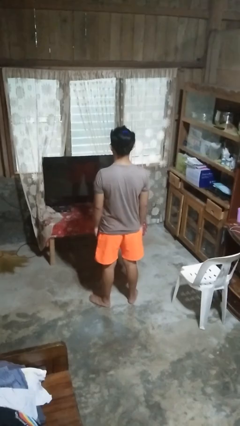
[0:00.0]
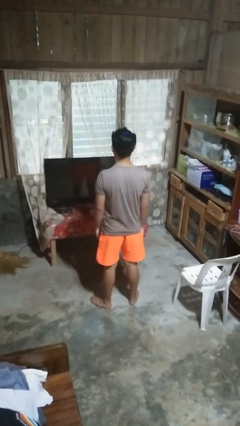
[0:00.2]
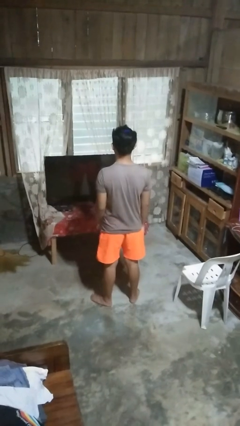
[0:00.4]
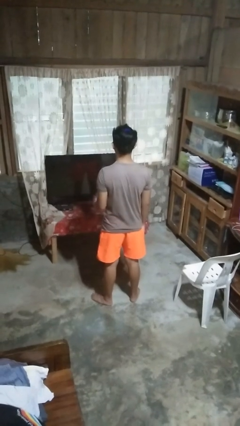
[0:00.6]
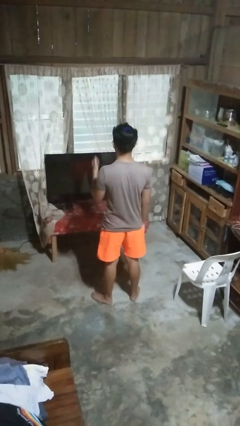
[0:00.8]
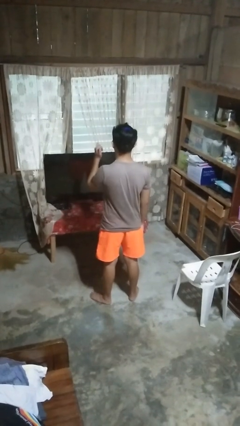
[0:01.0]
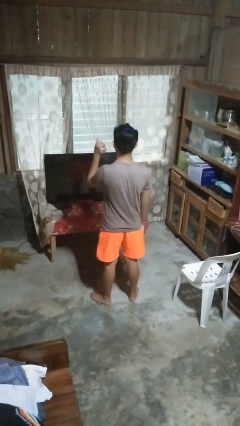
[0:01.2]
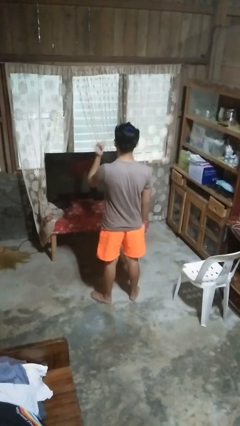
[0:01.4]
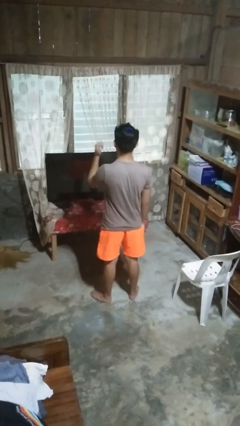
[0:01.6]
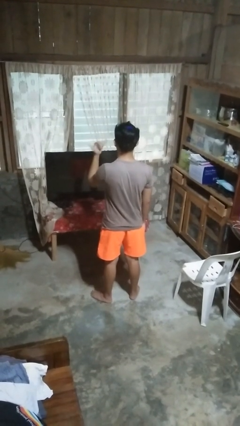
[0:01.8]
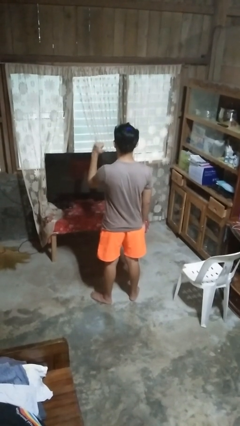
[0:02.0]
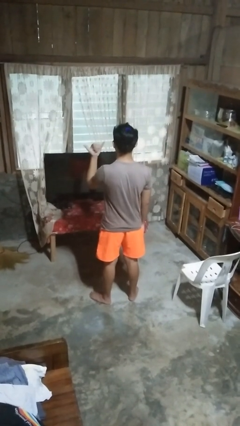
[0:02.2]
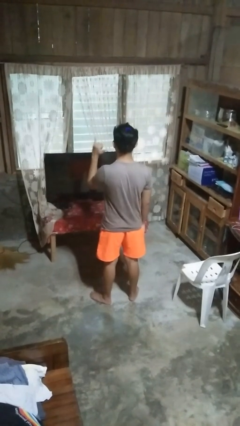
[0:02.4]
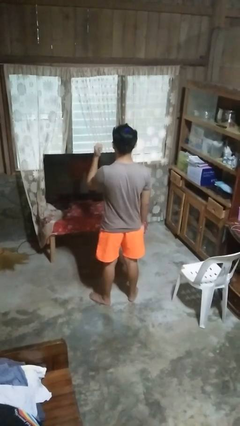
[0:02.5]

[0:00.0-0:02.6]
person gestures hang loose

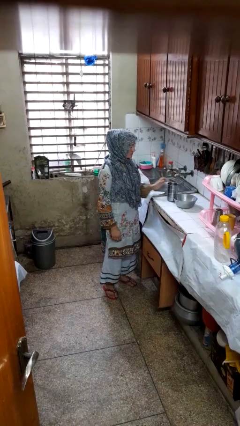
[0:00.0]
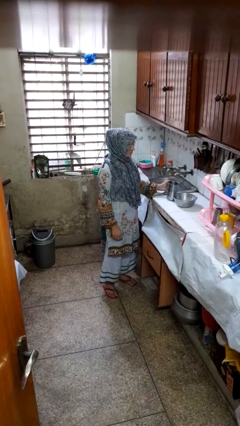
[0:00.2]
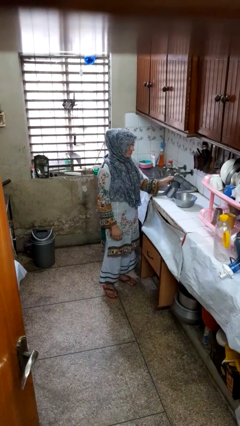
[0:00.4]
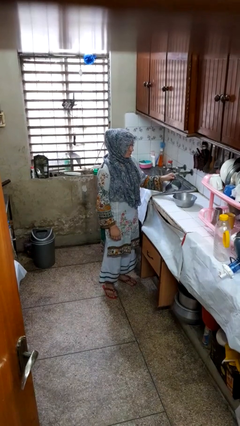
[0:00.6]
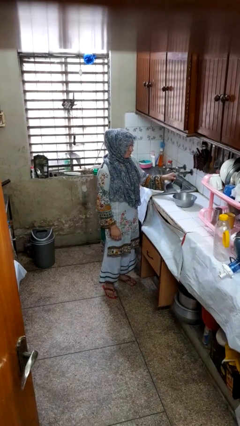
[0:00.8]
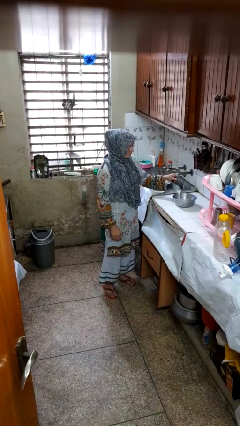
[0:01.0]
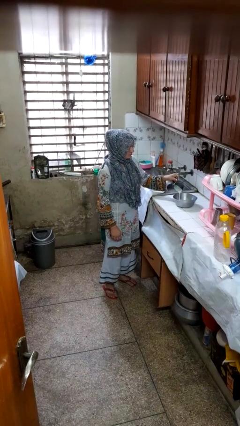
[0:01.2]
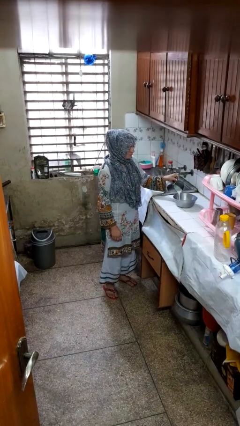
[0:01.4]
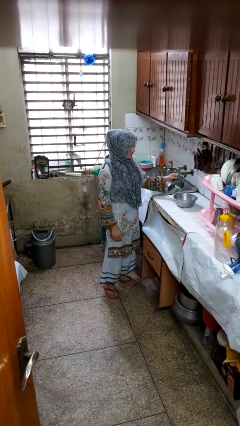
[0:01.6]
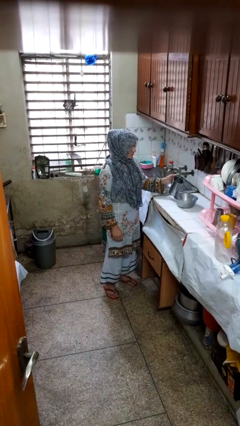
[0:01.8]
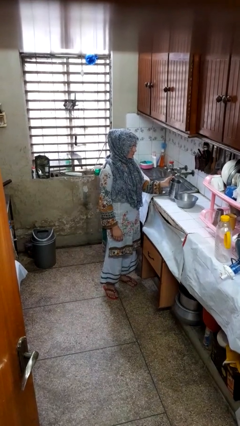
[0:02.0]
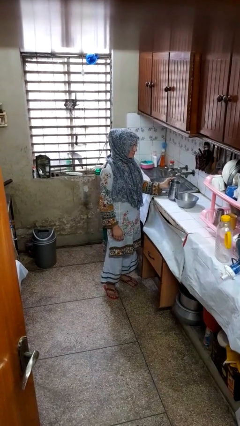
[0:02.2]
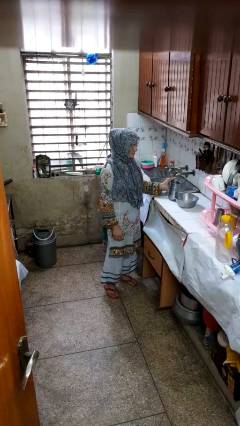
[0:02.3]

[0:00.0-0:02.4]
person pours into bowl

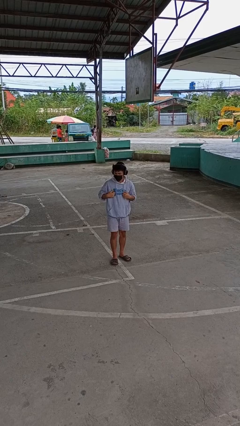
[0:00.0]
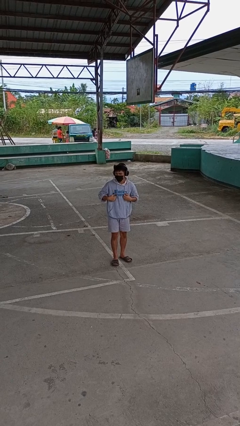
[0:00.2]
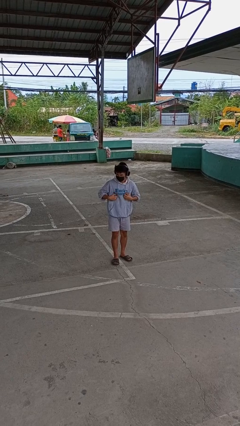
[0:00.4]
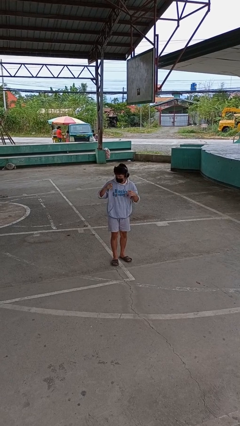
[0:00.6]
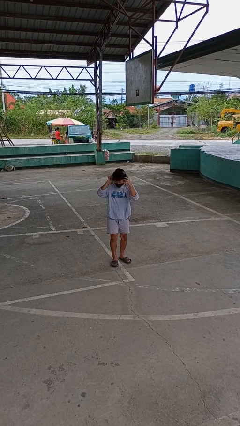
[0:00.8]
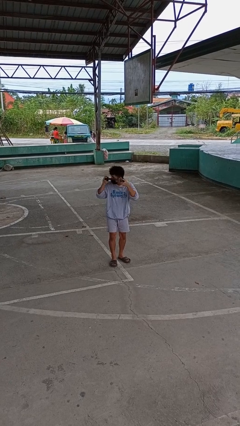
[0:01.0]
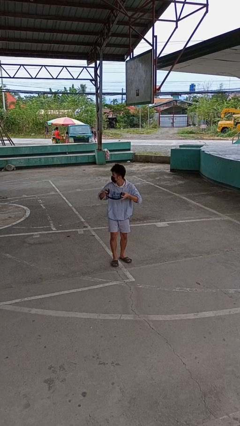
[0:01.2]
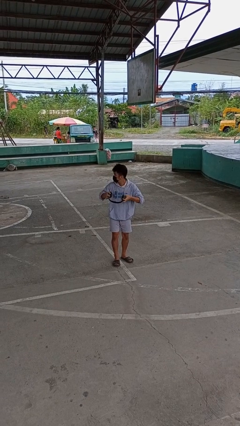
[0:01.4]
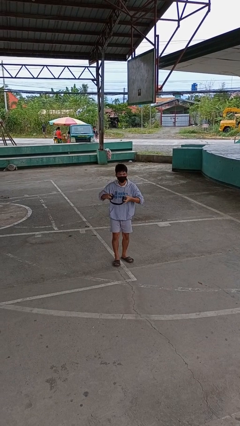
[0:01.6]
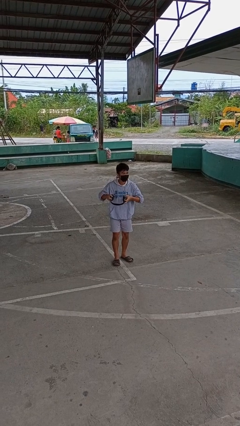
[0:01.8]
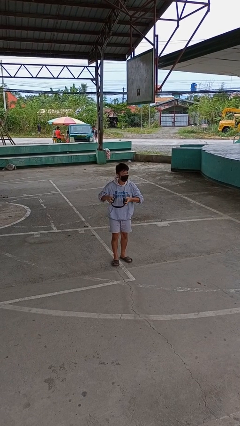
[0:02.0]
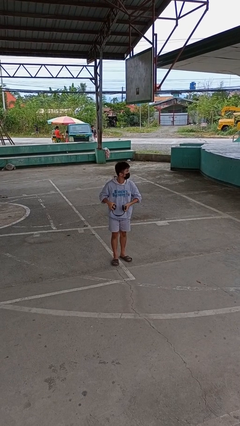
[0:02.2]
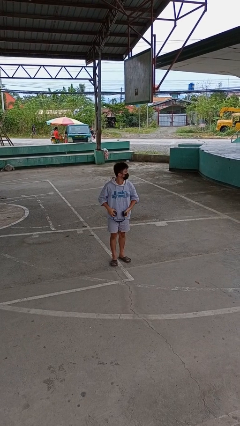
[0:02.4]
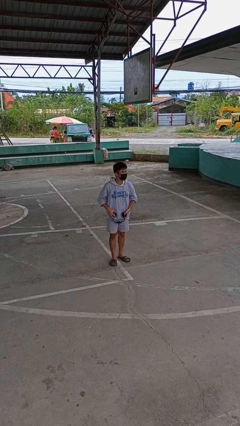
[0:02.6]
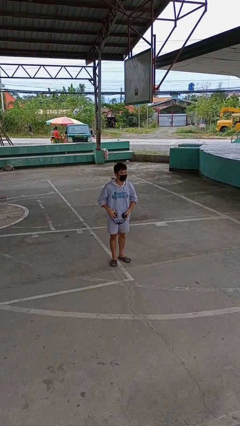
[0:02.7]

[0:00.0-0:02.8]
person takes off headphones

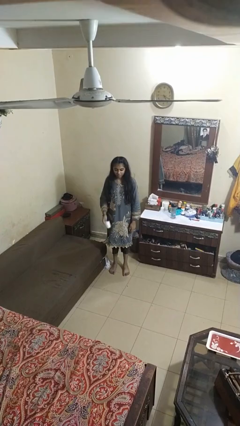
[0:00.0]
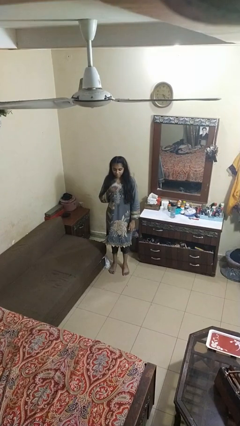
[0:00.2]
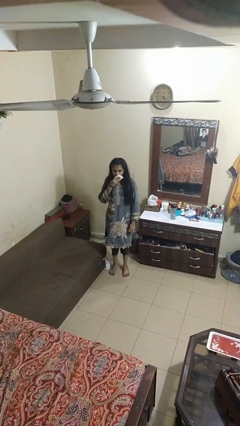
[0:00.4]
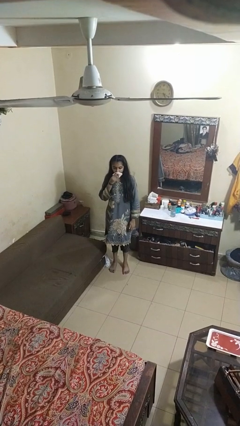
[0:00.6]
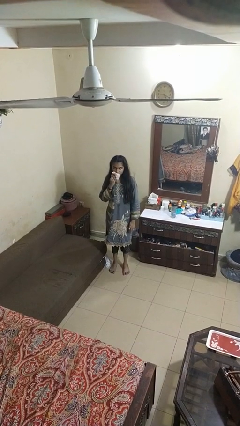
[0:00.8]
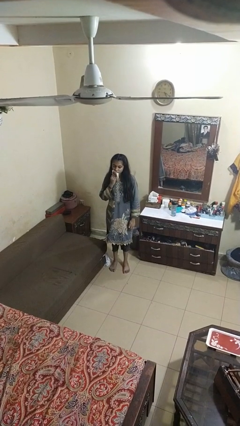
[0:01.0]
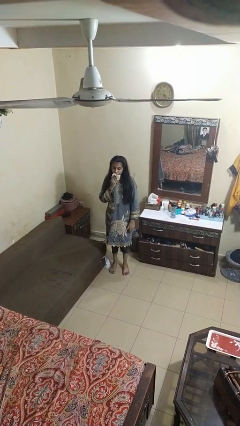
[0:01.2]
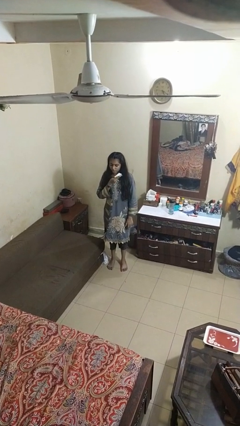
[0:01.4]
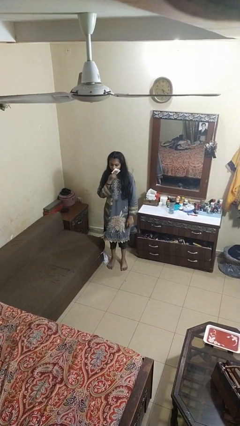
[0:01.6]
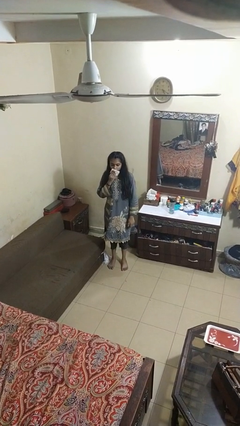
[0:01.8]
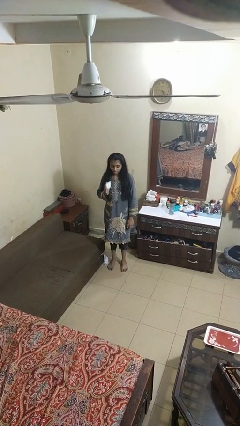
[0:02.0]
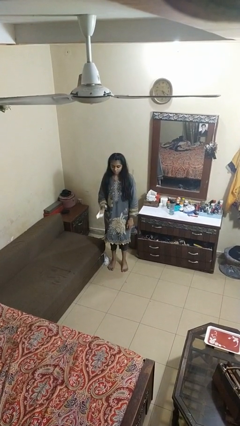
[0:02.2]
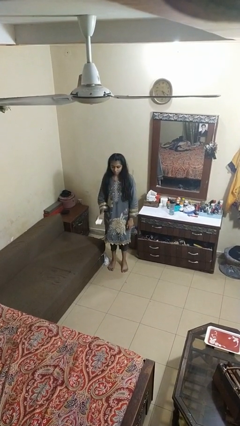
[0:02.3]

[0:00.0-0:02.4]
person wipes mouth with napkin

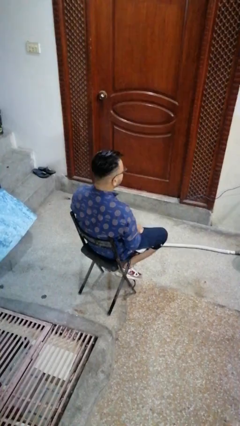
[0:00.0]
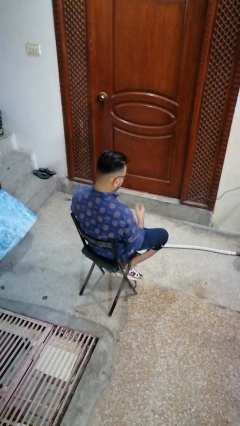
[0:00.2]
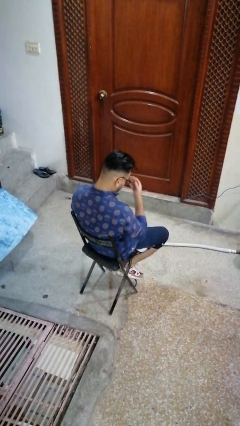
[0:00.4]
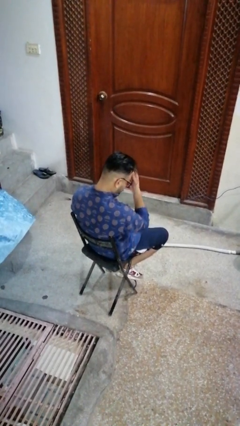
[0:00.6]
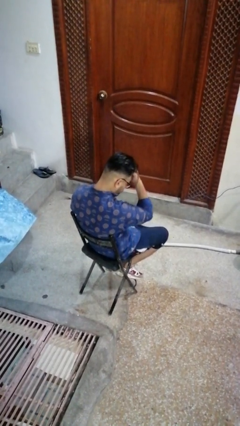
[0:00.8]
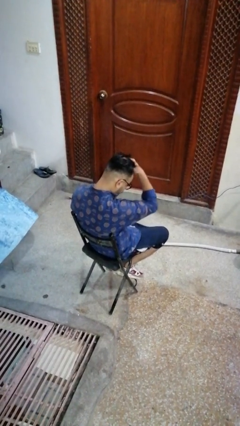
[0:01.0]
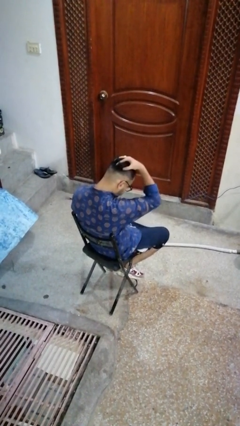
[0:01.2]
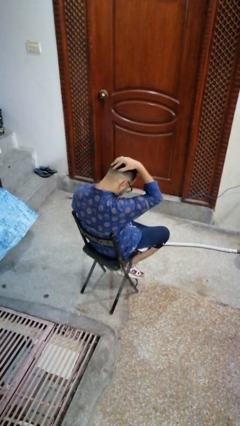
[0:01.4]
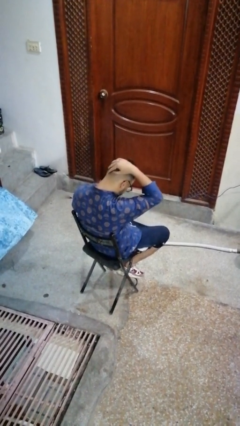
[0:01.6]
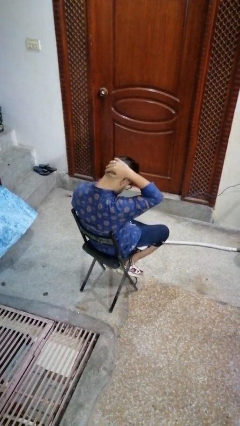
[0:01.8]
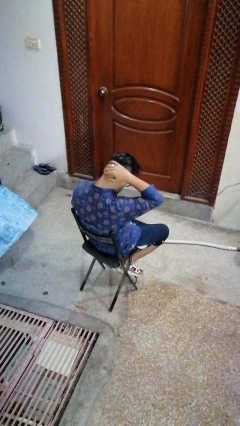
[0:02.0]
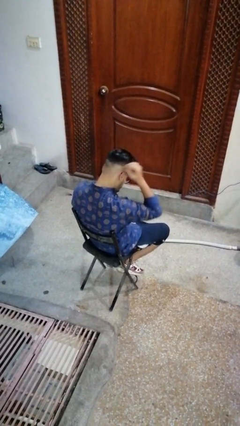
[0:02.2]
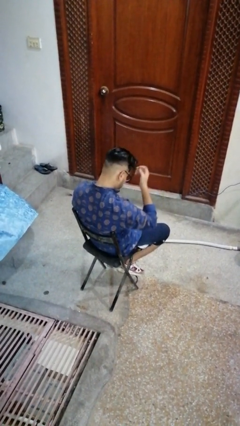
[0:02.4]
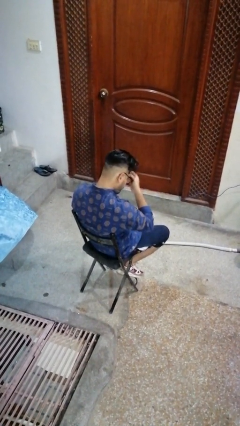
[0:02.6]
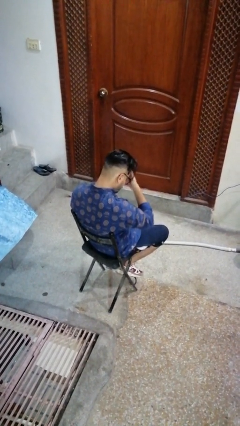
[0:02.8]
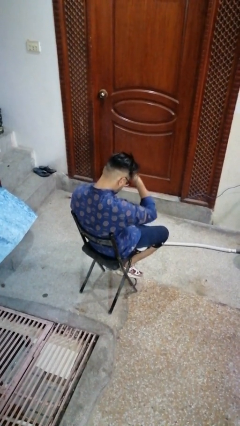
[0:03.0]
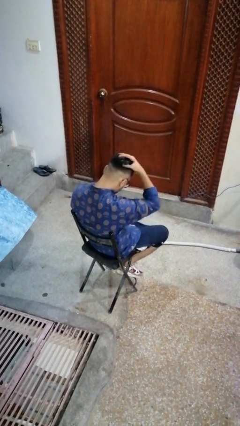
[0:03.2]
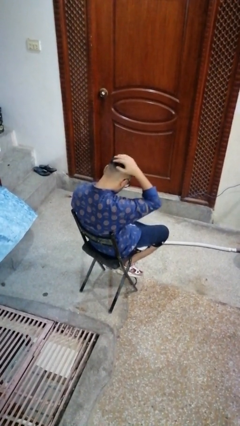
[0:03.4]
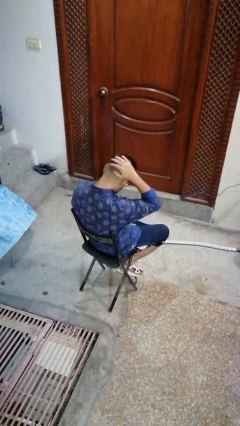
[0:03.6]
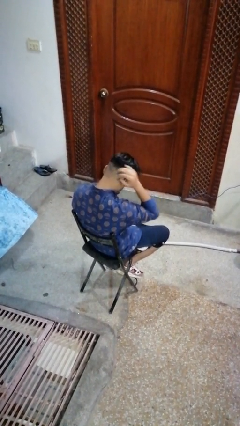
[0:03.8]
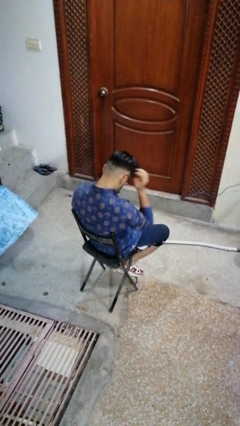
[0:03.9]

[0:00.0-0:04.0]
person strokes hair

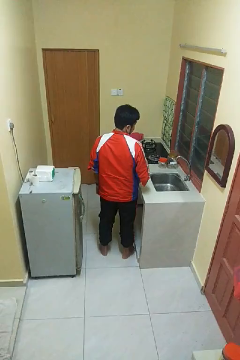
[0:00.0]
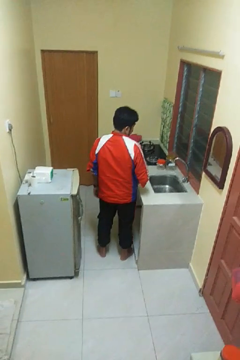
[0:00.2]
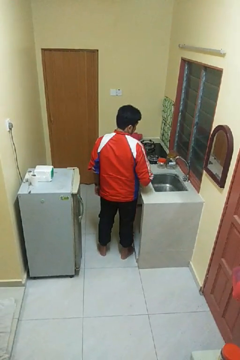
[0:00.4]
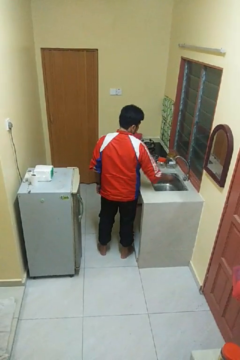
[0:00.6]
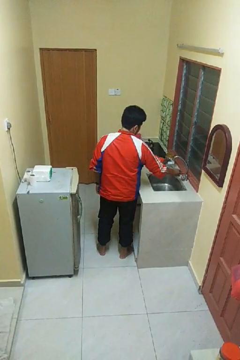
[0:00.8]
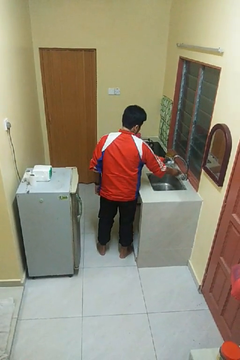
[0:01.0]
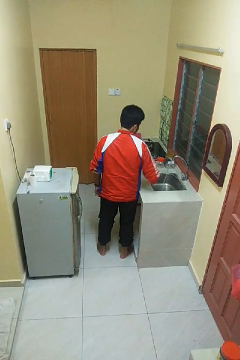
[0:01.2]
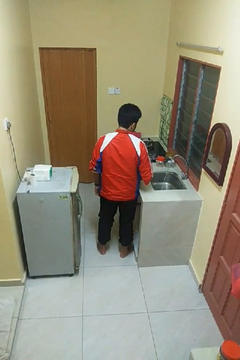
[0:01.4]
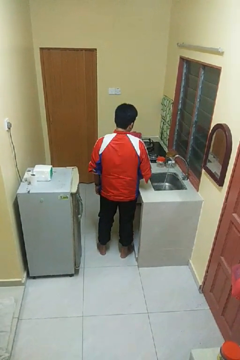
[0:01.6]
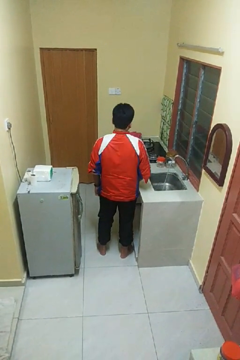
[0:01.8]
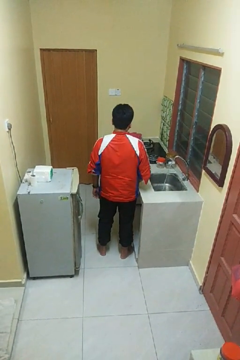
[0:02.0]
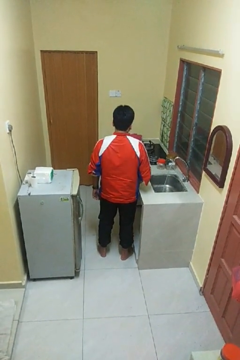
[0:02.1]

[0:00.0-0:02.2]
person turns on faucet

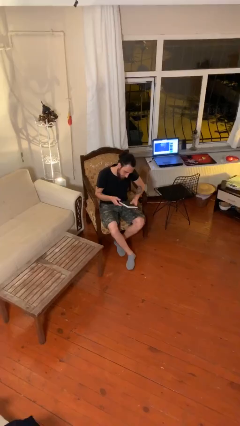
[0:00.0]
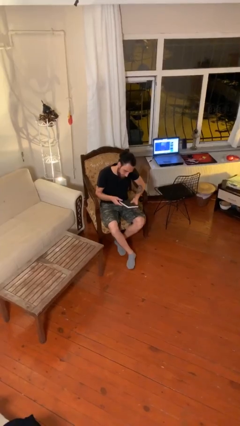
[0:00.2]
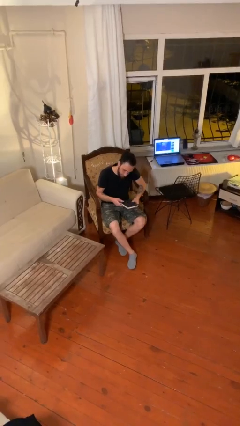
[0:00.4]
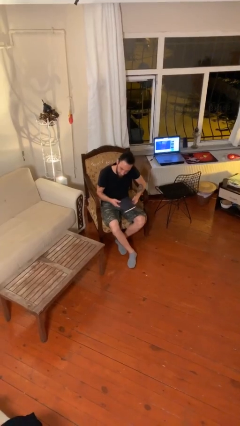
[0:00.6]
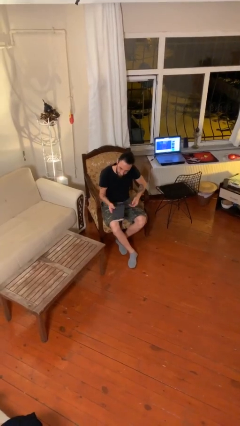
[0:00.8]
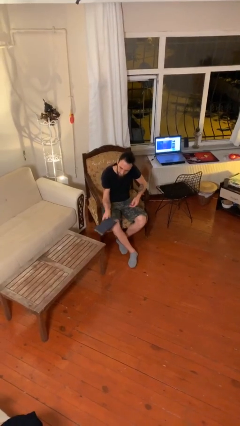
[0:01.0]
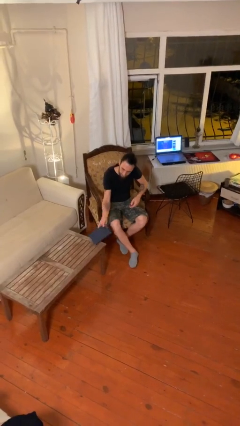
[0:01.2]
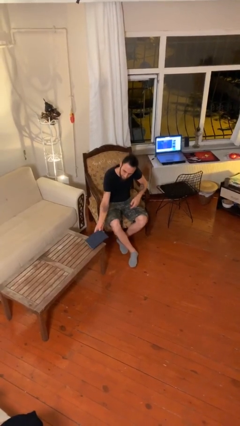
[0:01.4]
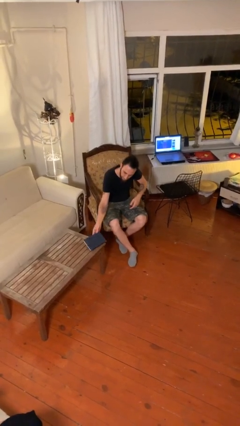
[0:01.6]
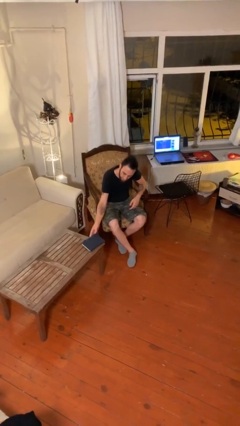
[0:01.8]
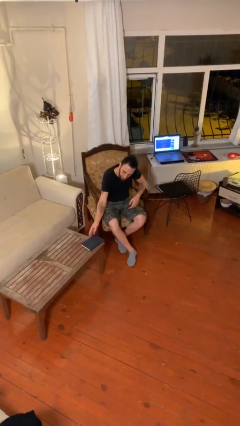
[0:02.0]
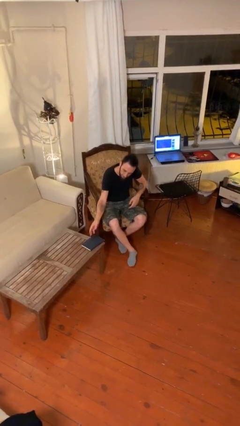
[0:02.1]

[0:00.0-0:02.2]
person puts down object on table
